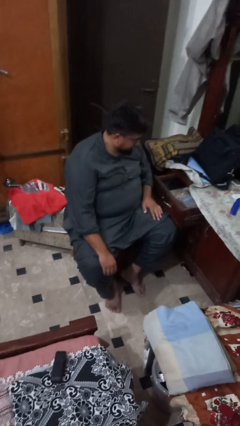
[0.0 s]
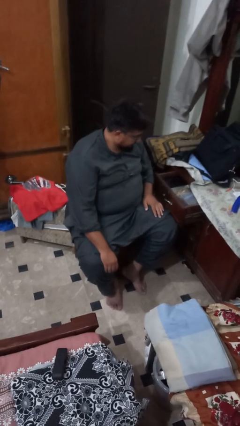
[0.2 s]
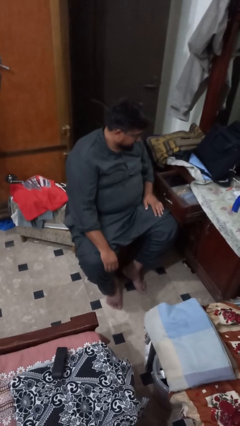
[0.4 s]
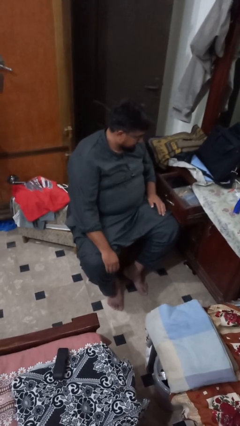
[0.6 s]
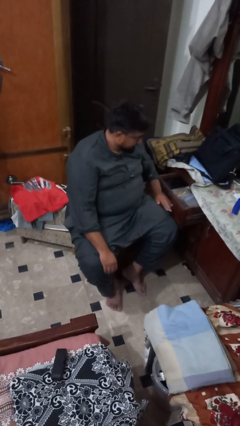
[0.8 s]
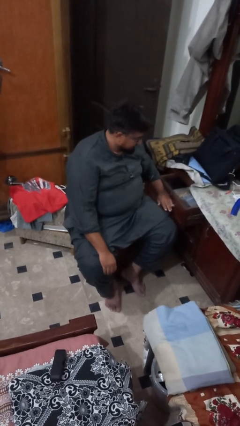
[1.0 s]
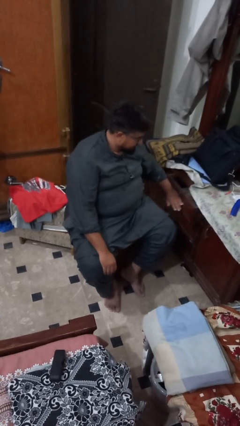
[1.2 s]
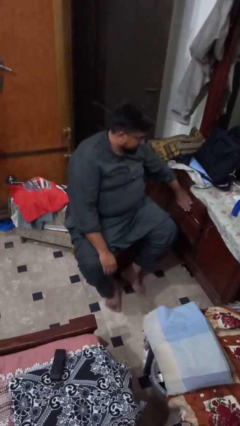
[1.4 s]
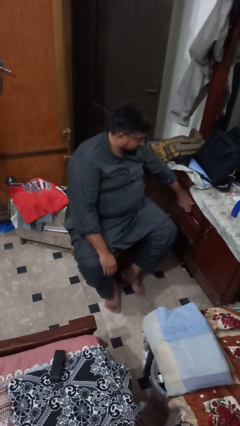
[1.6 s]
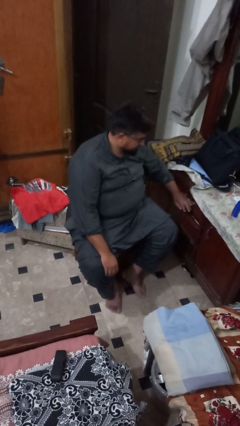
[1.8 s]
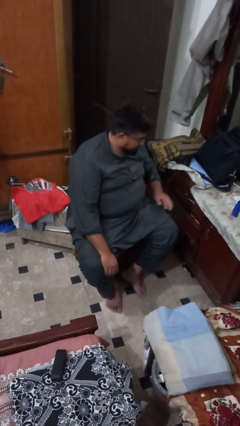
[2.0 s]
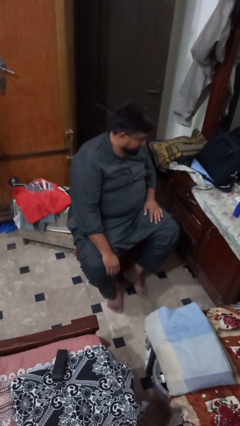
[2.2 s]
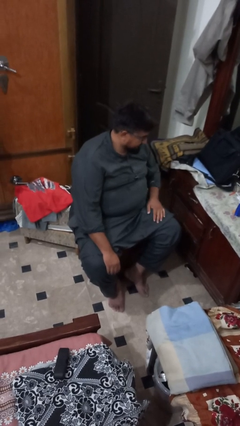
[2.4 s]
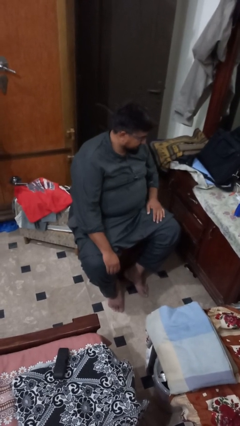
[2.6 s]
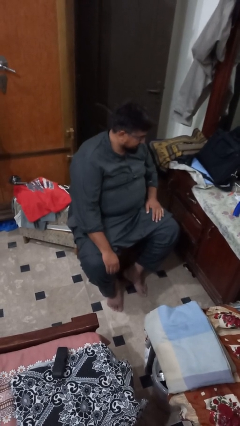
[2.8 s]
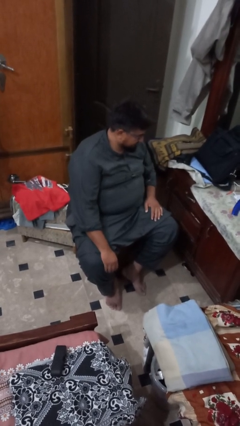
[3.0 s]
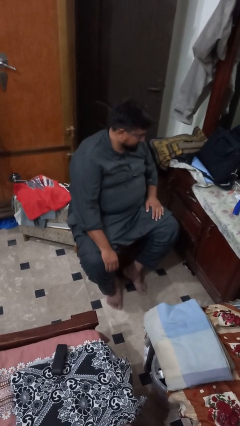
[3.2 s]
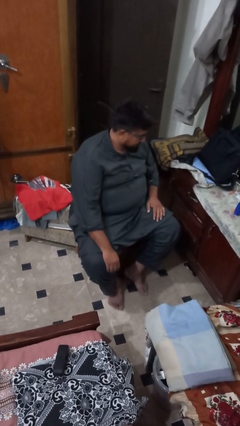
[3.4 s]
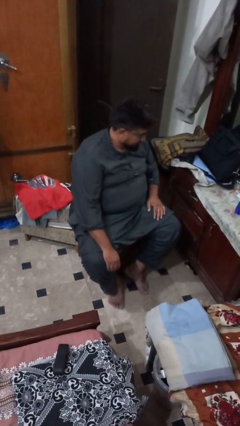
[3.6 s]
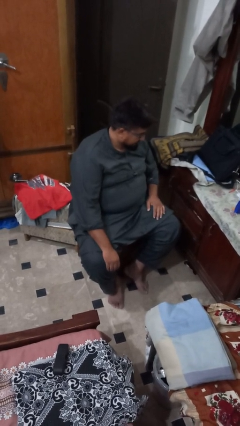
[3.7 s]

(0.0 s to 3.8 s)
person closes dresser drawer

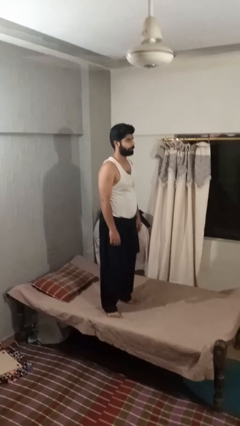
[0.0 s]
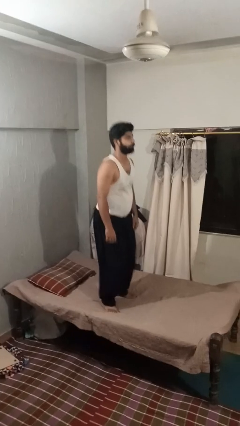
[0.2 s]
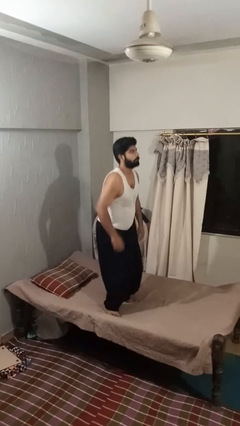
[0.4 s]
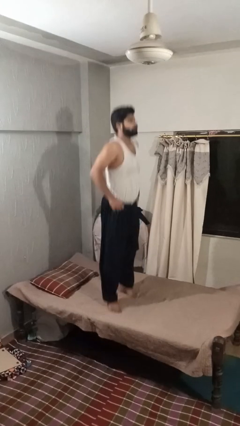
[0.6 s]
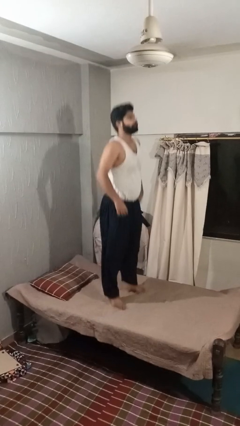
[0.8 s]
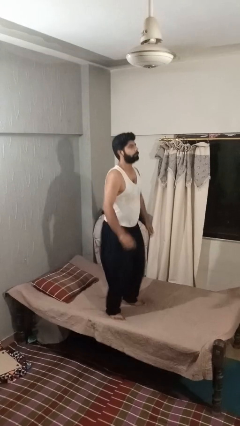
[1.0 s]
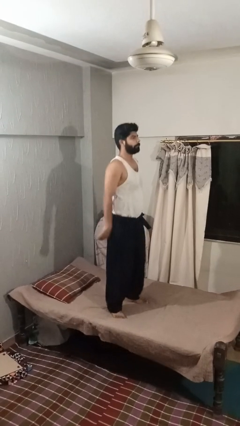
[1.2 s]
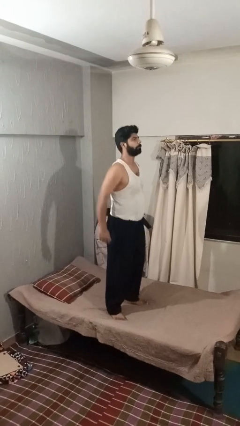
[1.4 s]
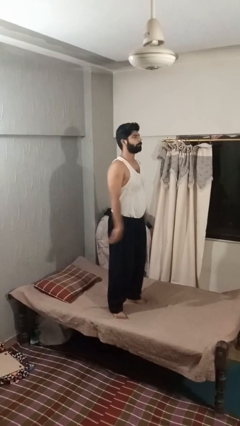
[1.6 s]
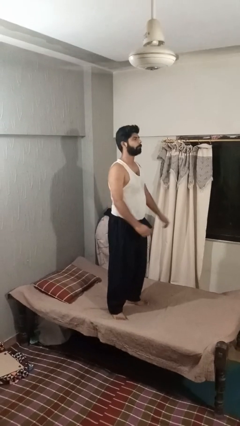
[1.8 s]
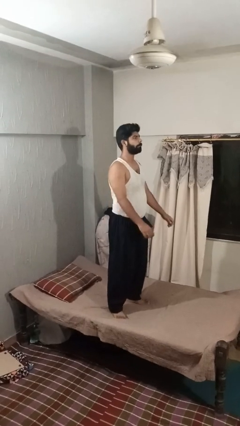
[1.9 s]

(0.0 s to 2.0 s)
person jumps on bed

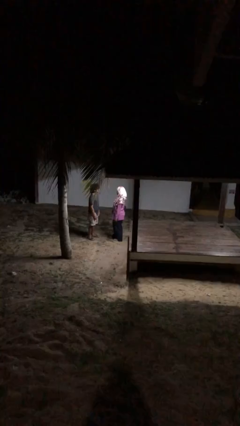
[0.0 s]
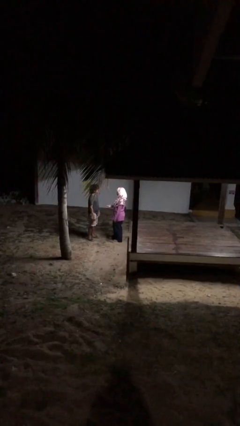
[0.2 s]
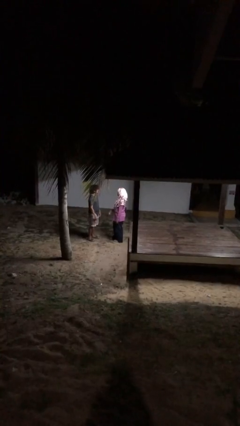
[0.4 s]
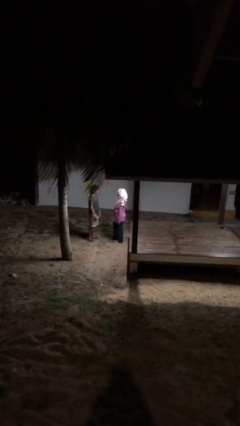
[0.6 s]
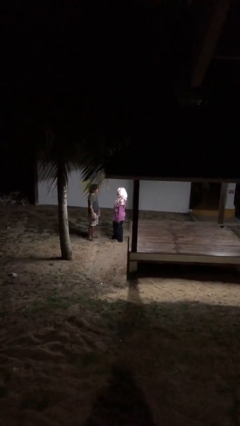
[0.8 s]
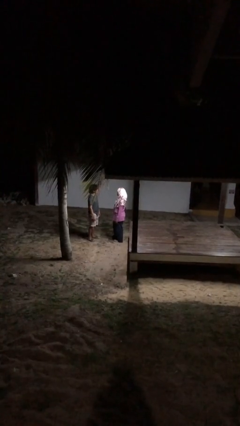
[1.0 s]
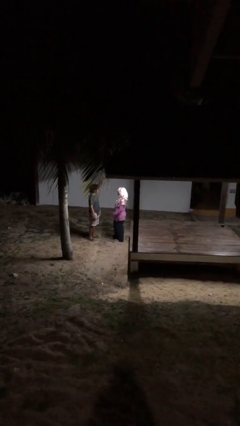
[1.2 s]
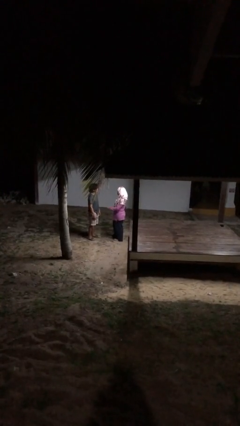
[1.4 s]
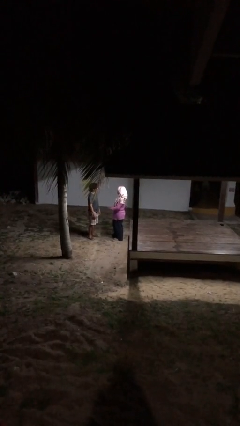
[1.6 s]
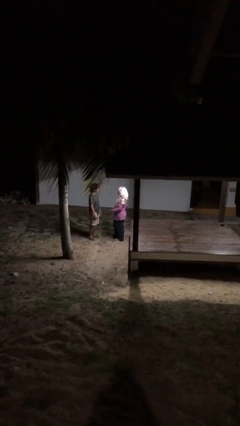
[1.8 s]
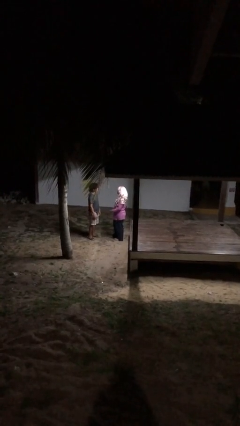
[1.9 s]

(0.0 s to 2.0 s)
person talks to person

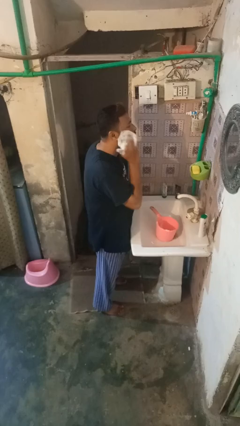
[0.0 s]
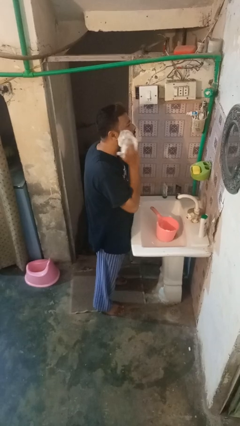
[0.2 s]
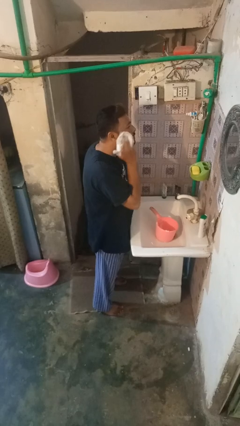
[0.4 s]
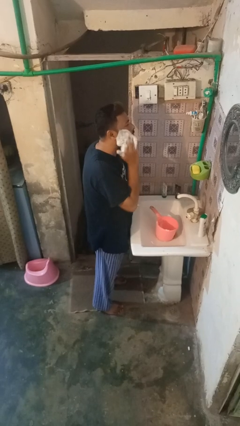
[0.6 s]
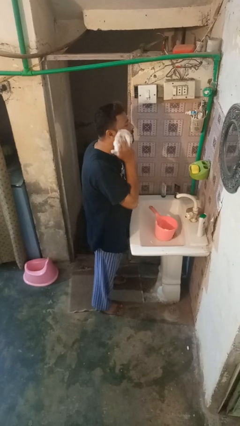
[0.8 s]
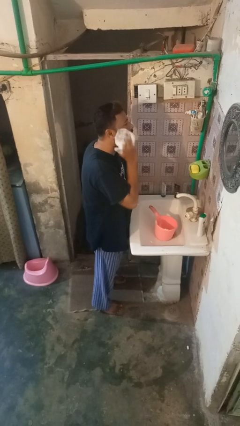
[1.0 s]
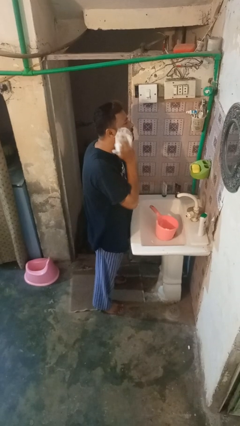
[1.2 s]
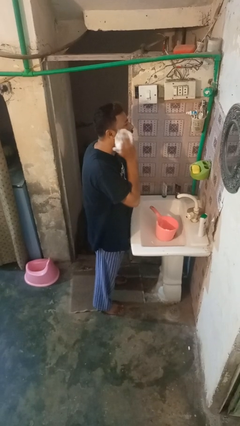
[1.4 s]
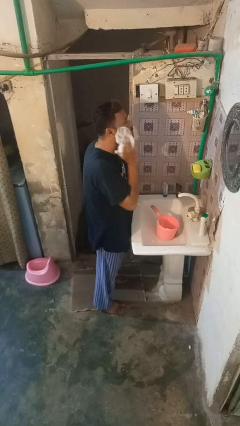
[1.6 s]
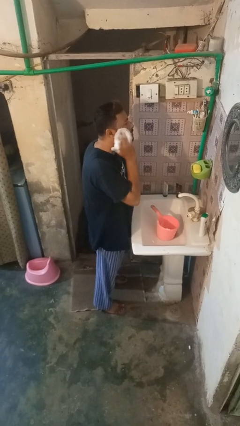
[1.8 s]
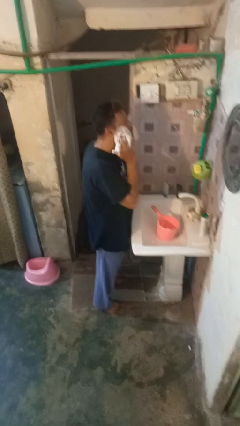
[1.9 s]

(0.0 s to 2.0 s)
person shaves face

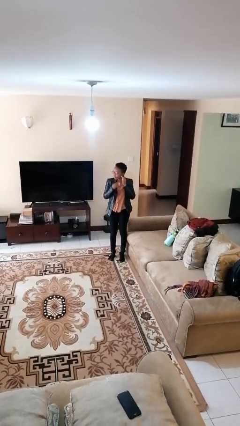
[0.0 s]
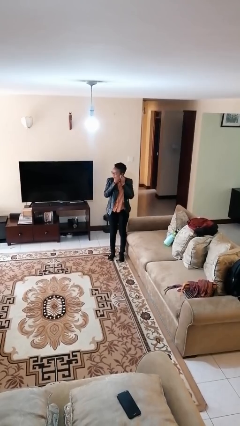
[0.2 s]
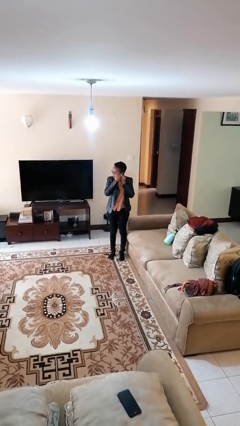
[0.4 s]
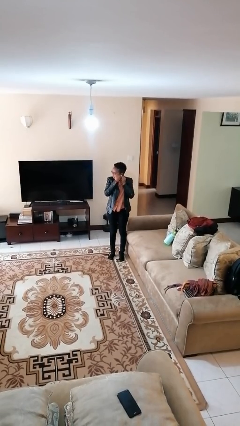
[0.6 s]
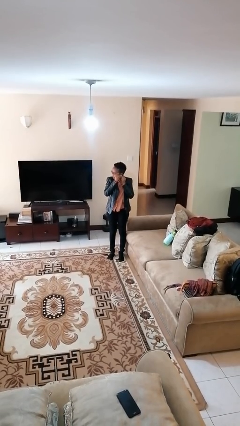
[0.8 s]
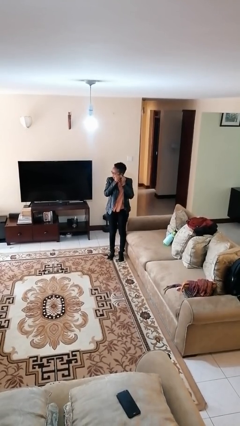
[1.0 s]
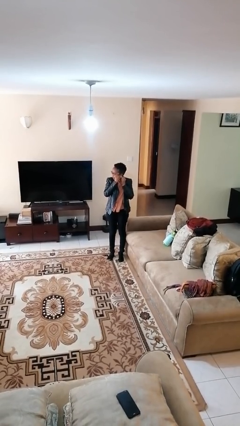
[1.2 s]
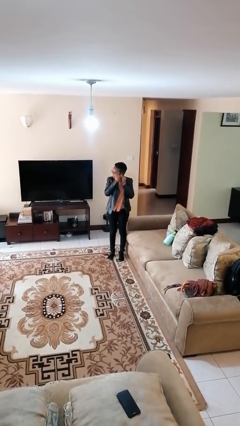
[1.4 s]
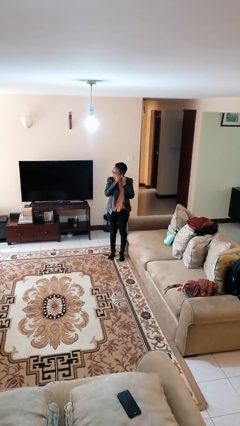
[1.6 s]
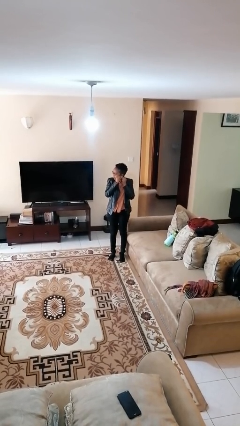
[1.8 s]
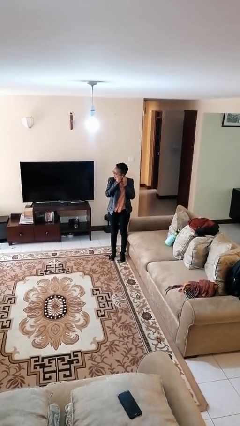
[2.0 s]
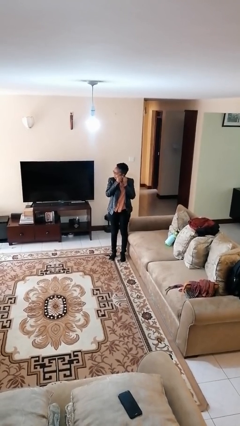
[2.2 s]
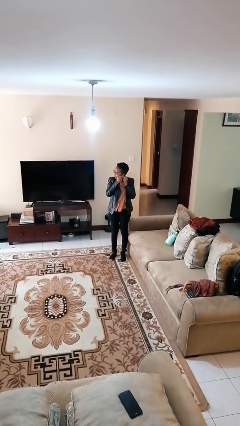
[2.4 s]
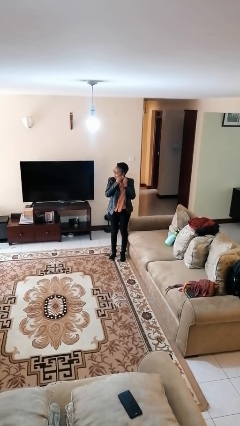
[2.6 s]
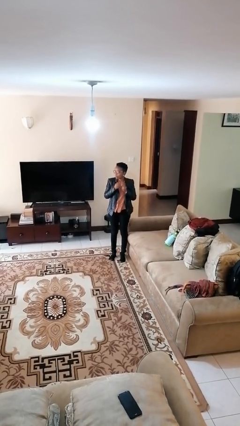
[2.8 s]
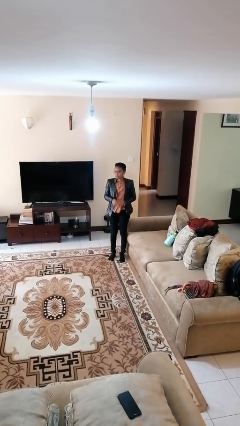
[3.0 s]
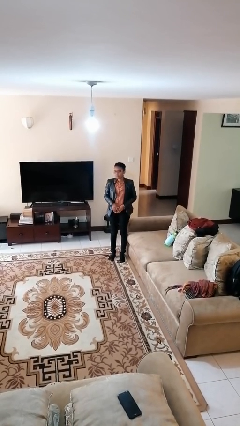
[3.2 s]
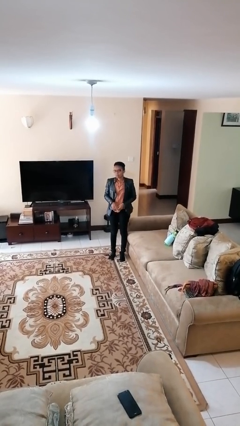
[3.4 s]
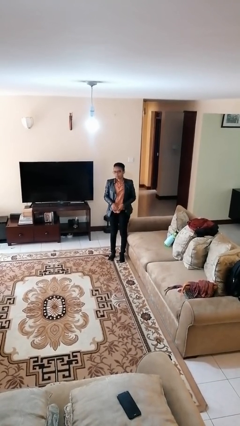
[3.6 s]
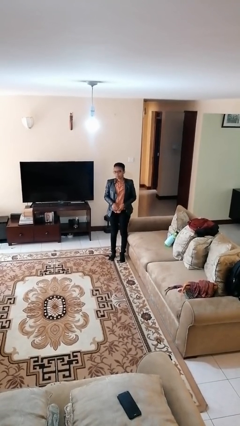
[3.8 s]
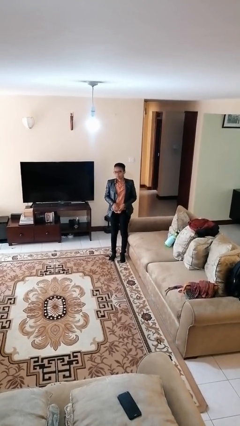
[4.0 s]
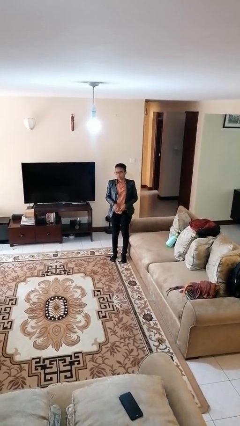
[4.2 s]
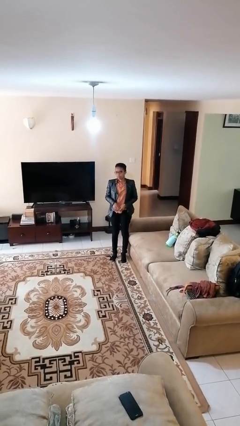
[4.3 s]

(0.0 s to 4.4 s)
person puts on earrings

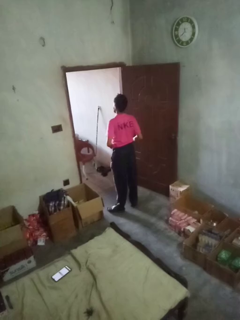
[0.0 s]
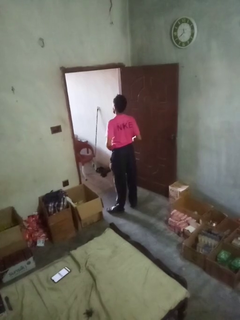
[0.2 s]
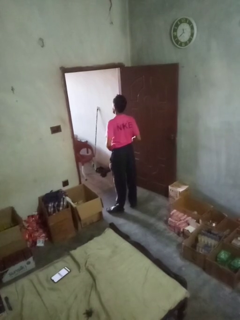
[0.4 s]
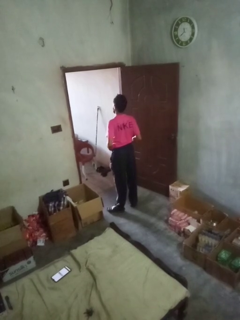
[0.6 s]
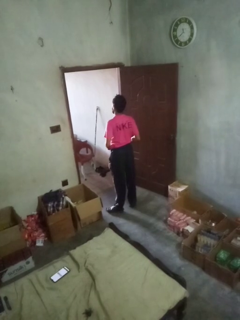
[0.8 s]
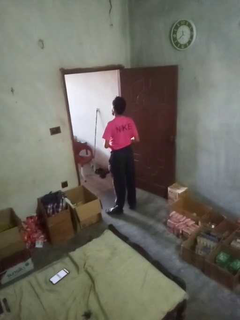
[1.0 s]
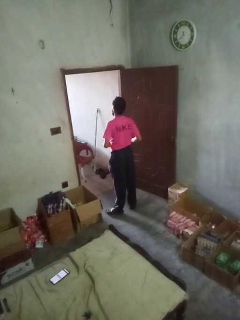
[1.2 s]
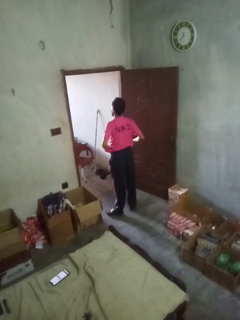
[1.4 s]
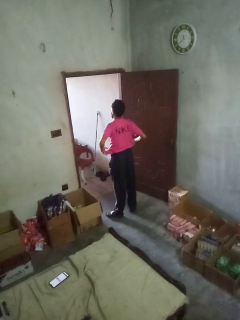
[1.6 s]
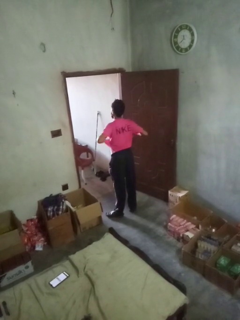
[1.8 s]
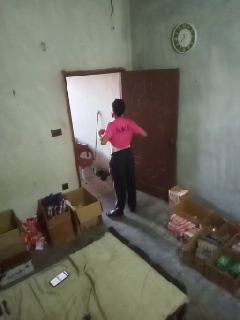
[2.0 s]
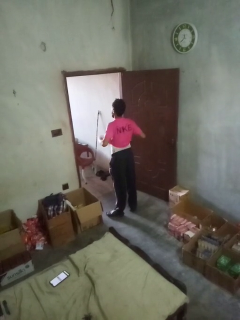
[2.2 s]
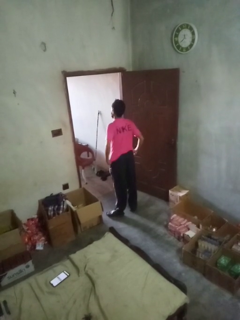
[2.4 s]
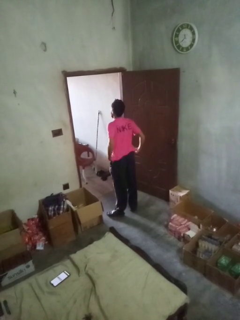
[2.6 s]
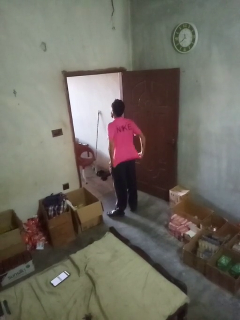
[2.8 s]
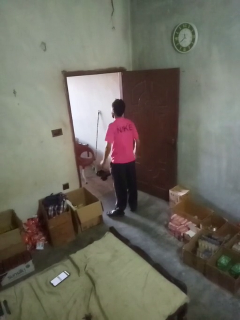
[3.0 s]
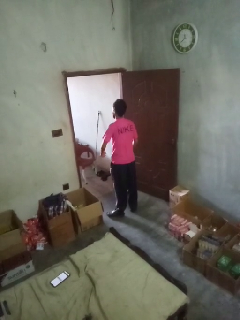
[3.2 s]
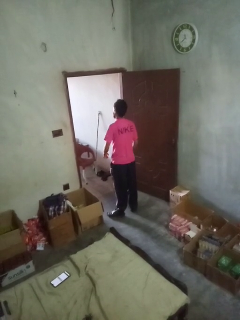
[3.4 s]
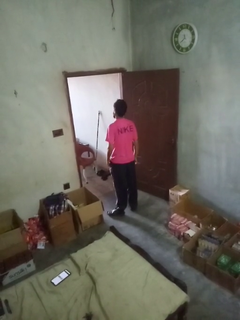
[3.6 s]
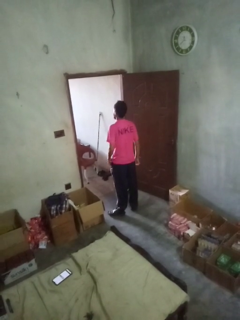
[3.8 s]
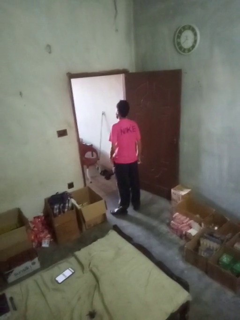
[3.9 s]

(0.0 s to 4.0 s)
person untucks shirt
